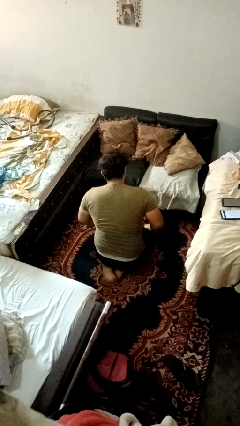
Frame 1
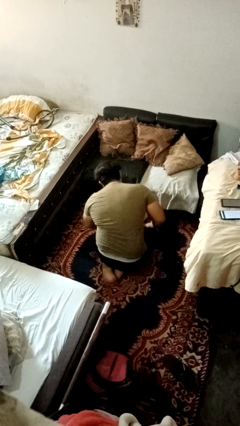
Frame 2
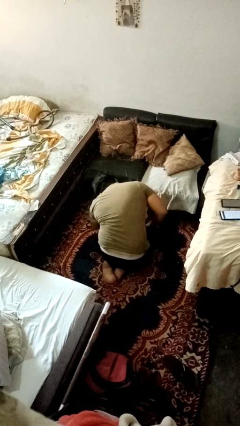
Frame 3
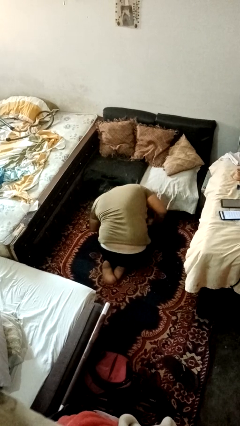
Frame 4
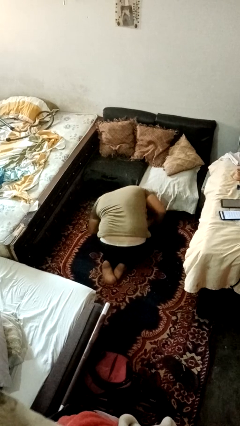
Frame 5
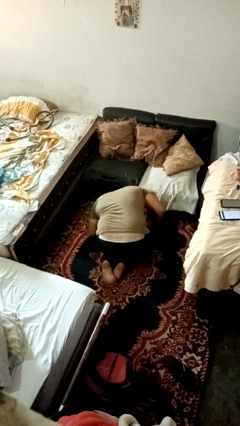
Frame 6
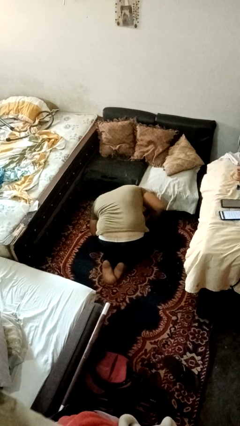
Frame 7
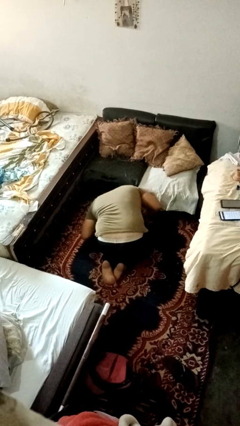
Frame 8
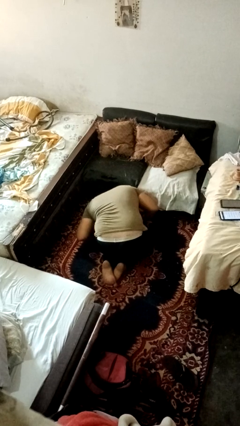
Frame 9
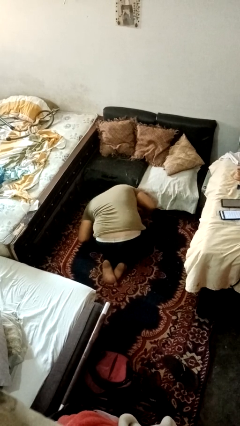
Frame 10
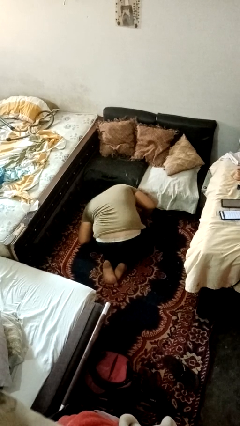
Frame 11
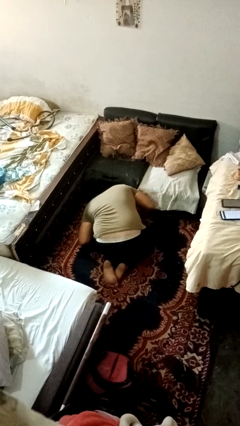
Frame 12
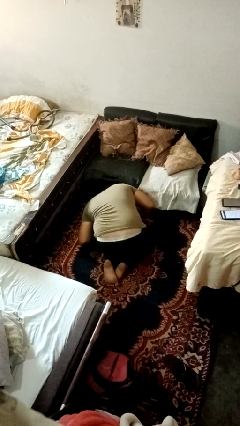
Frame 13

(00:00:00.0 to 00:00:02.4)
person searches under couch

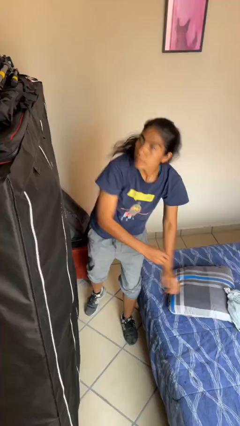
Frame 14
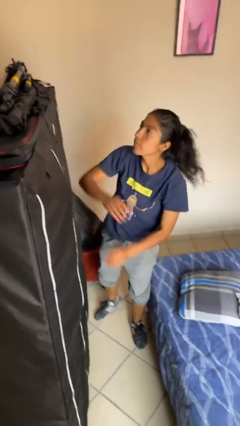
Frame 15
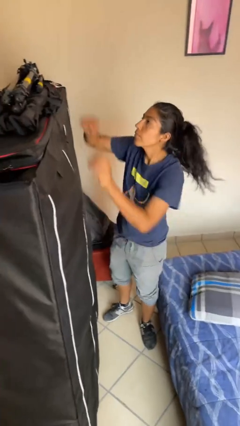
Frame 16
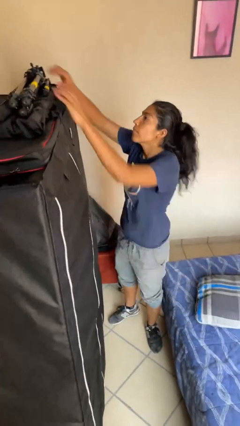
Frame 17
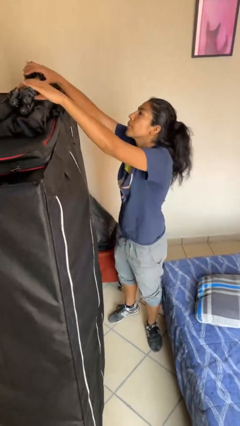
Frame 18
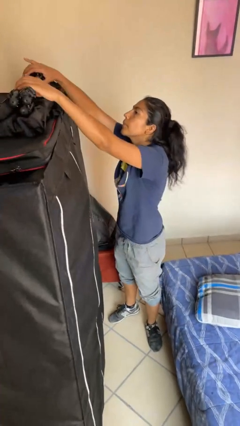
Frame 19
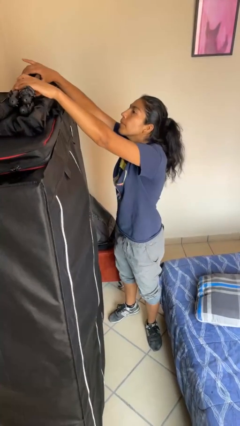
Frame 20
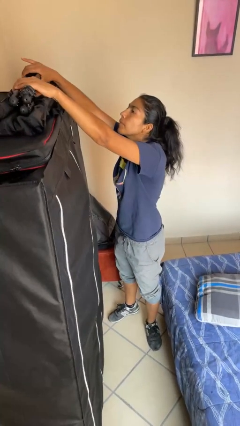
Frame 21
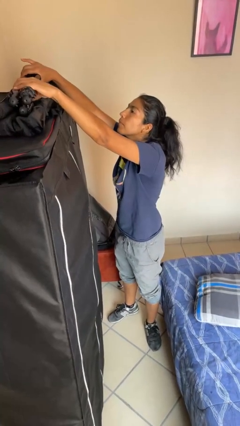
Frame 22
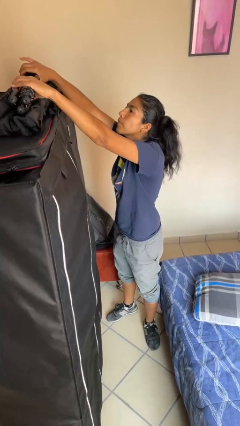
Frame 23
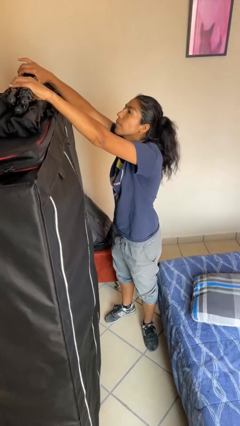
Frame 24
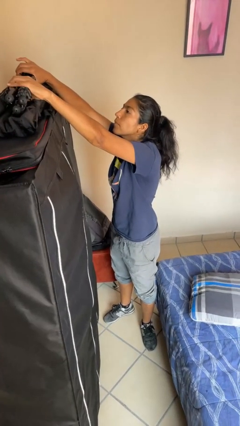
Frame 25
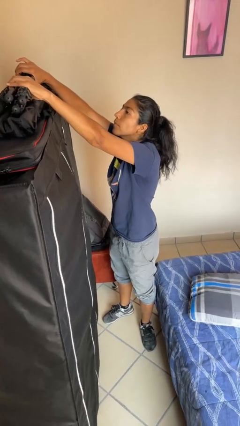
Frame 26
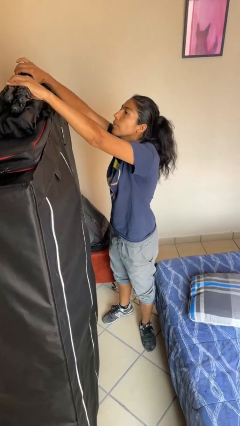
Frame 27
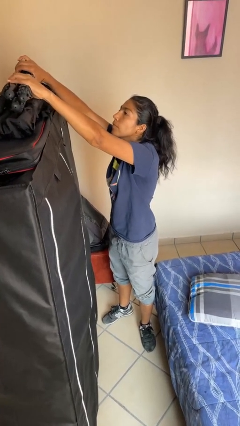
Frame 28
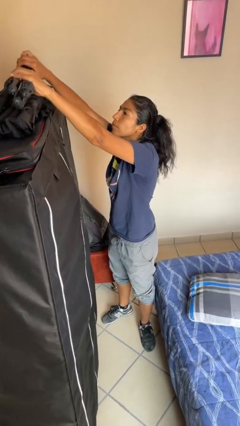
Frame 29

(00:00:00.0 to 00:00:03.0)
person picks up object from shelf

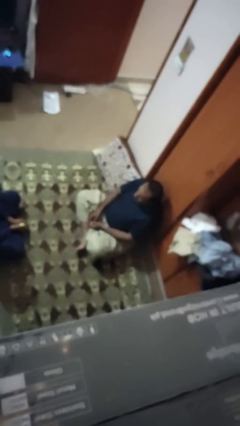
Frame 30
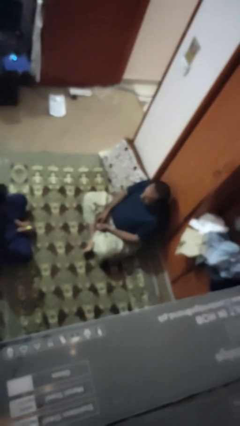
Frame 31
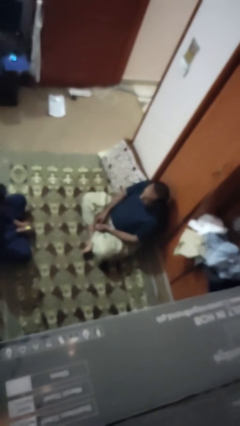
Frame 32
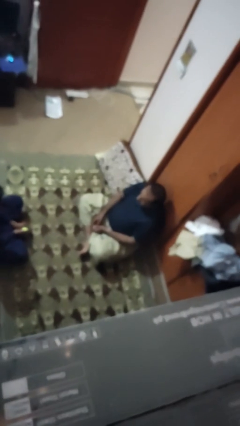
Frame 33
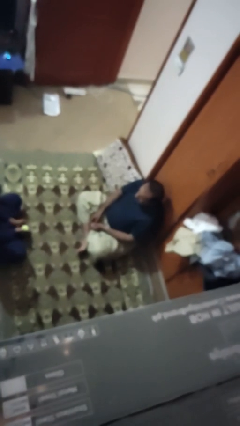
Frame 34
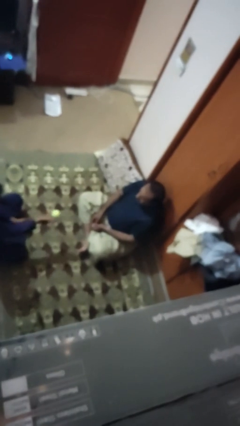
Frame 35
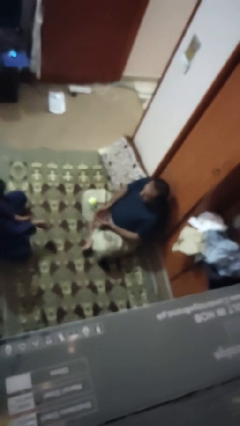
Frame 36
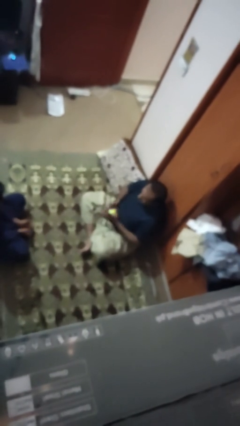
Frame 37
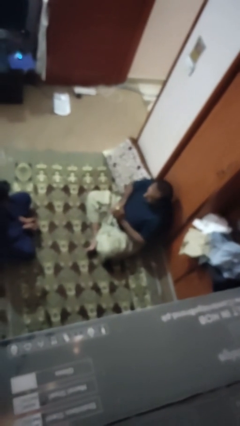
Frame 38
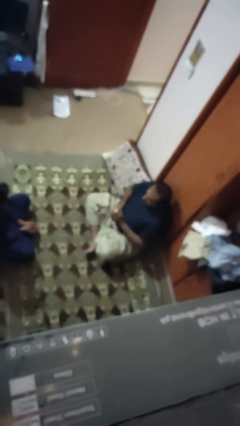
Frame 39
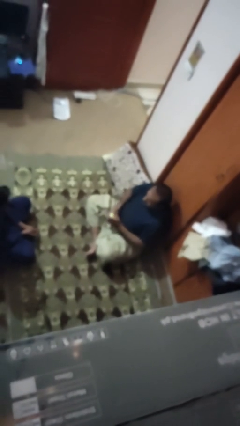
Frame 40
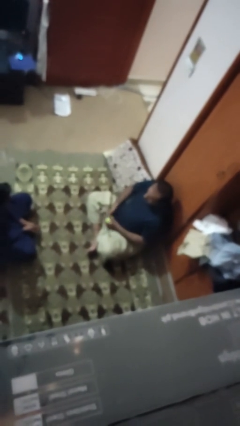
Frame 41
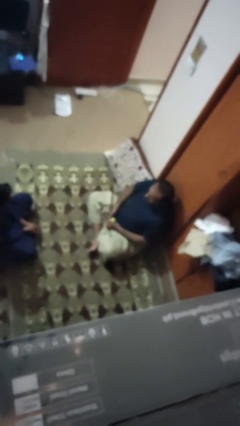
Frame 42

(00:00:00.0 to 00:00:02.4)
person catches object from person

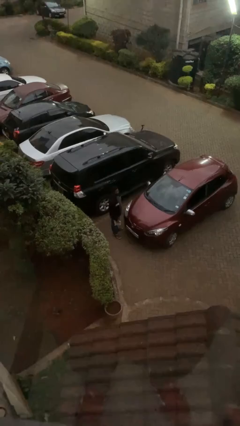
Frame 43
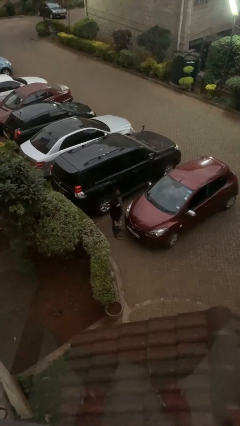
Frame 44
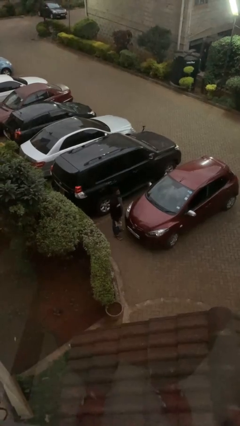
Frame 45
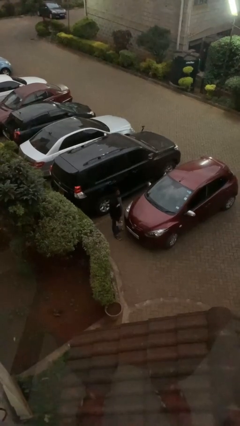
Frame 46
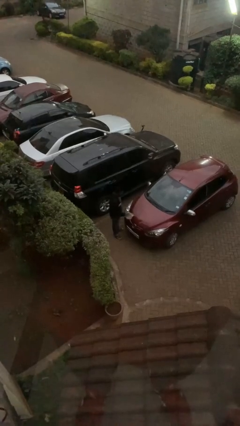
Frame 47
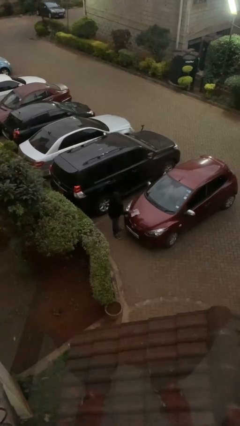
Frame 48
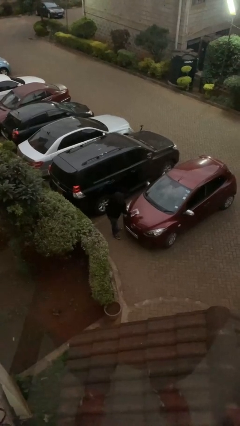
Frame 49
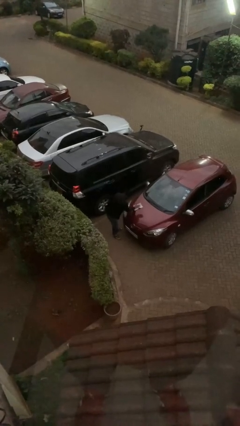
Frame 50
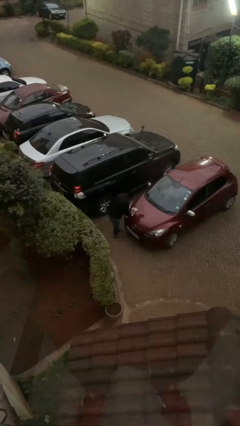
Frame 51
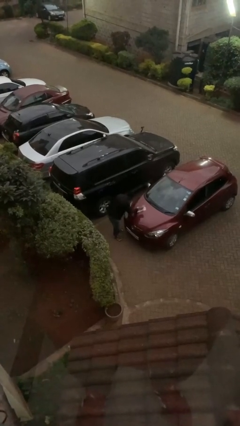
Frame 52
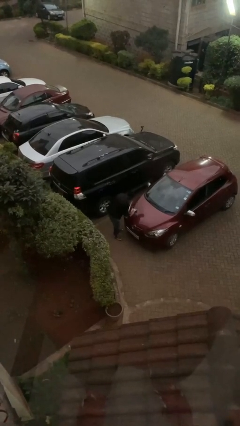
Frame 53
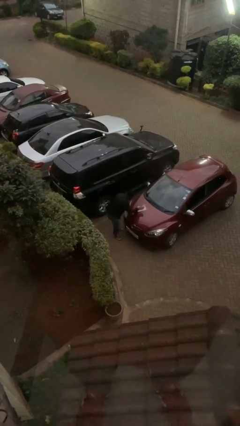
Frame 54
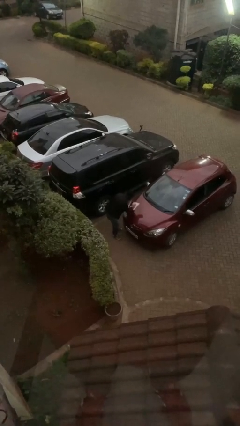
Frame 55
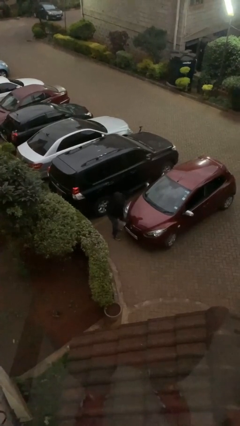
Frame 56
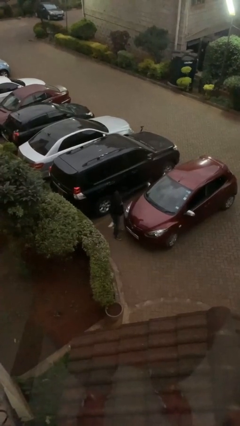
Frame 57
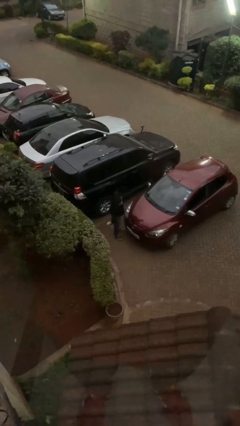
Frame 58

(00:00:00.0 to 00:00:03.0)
person polishes car with rag

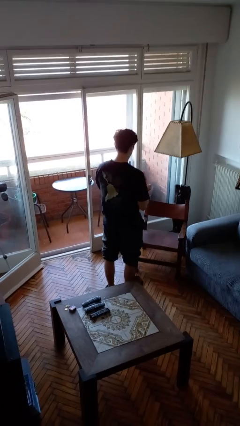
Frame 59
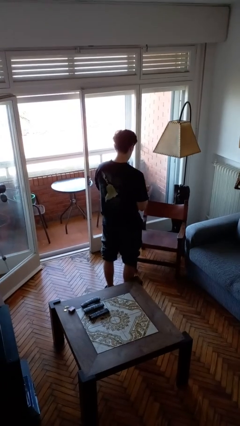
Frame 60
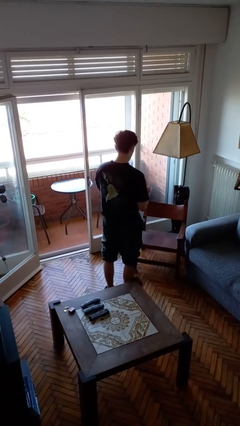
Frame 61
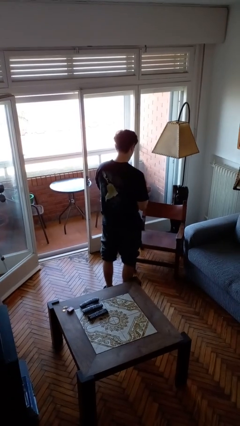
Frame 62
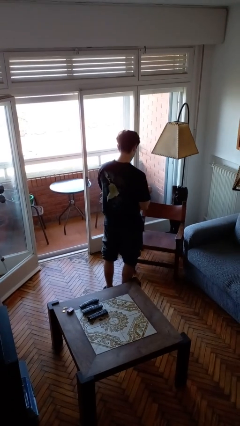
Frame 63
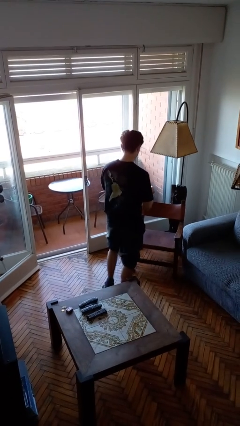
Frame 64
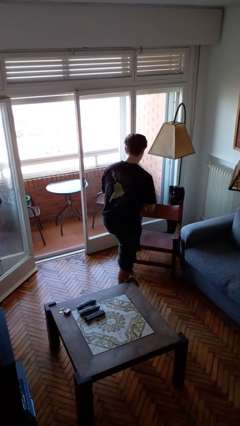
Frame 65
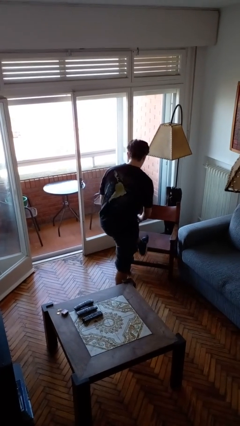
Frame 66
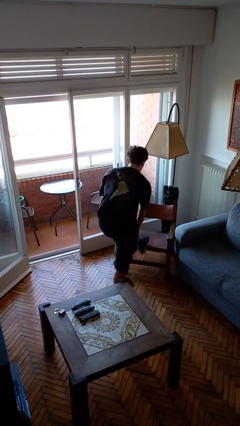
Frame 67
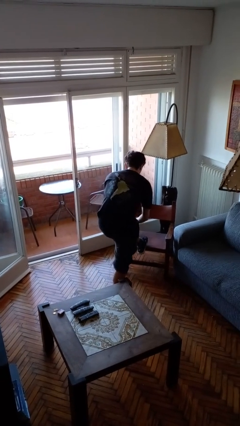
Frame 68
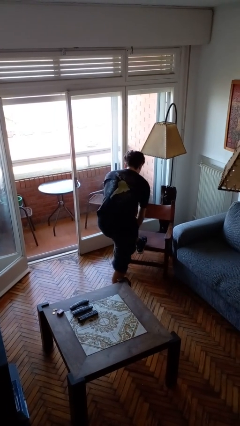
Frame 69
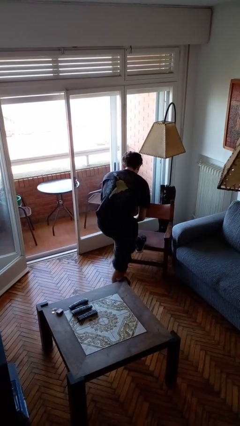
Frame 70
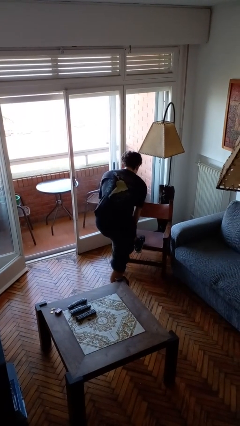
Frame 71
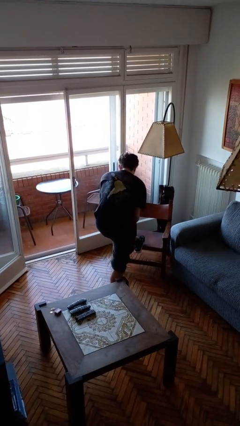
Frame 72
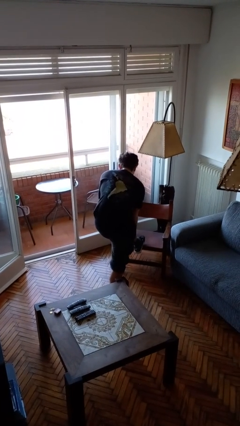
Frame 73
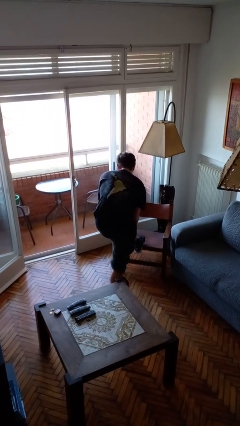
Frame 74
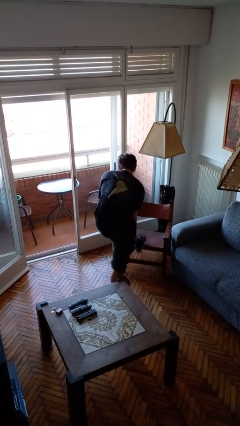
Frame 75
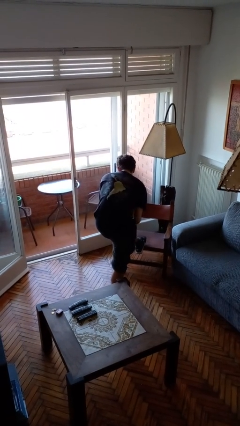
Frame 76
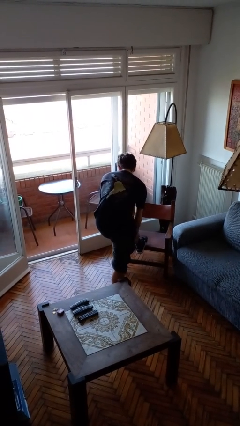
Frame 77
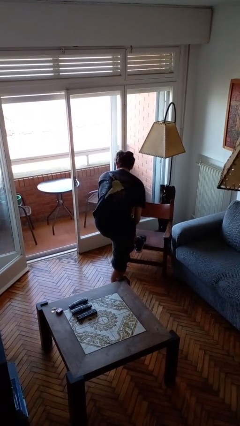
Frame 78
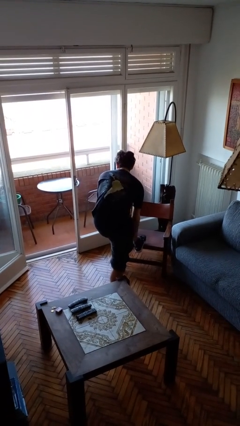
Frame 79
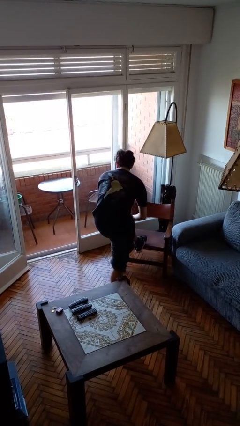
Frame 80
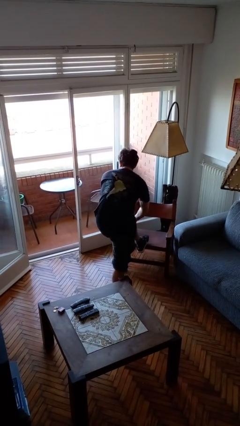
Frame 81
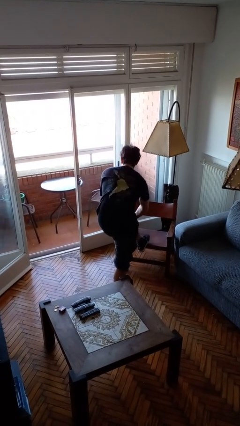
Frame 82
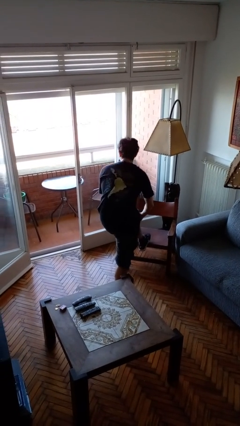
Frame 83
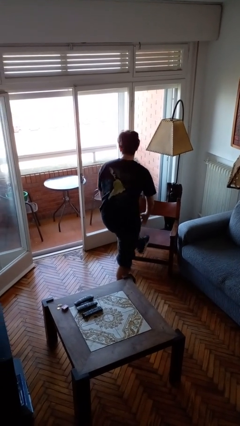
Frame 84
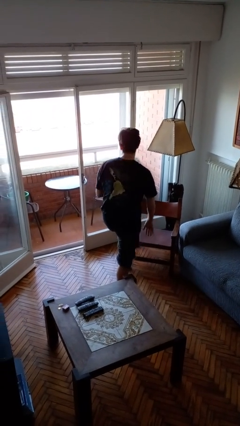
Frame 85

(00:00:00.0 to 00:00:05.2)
person applies sunscreen

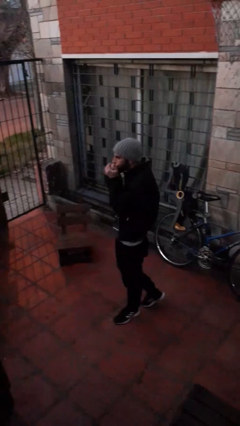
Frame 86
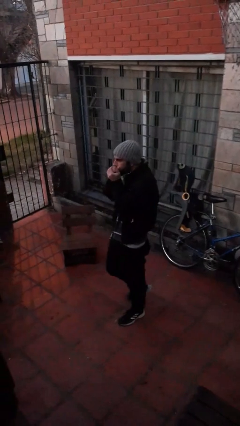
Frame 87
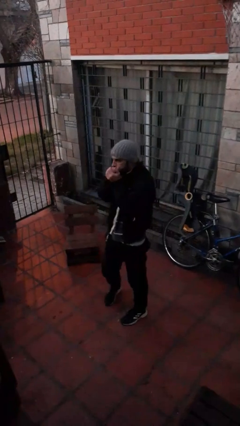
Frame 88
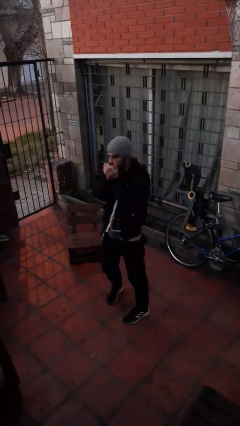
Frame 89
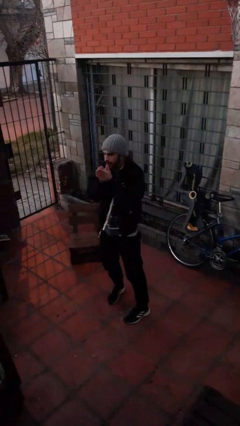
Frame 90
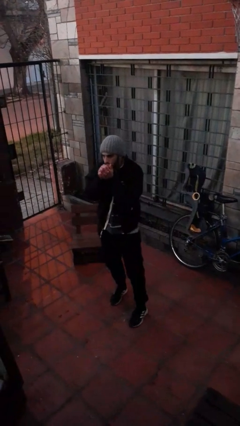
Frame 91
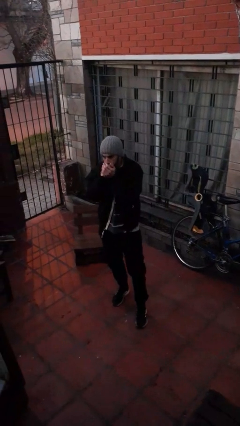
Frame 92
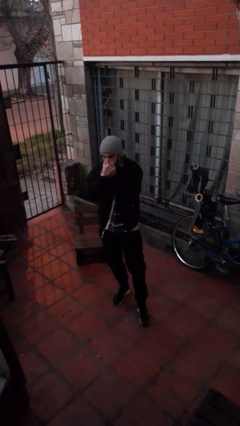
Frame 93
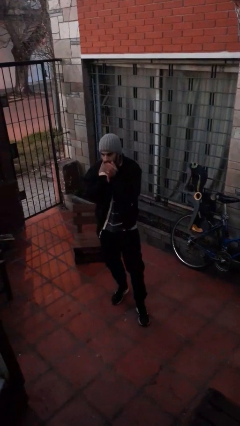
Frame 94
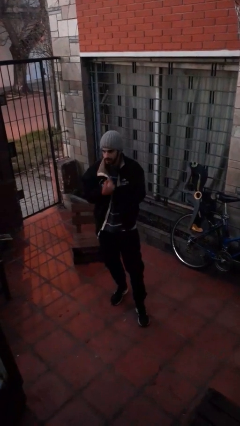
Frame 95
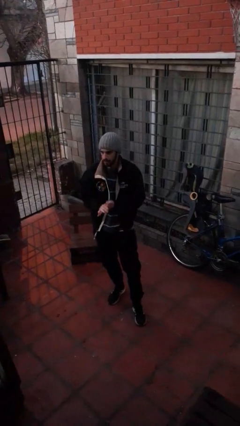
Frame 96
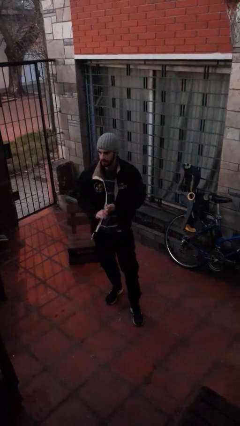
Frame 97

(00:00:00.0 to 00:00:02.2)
person blows into hands
